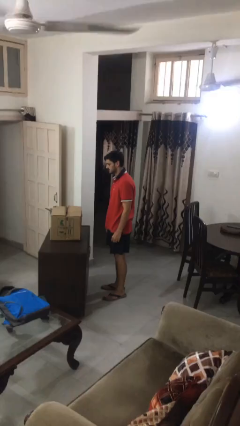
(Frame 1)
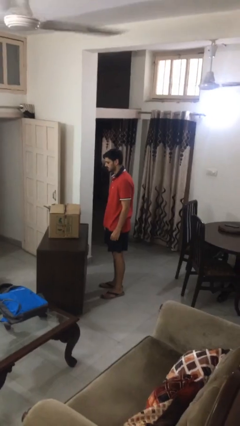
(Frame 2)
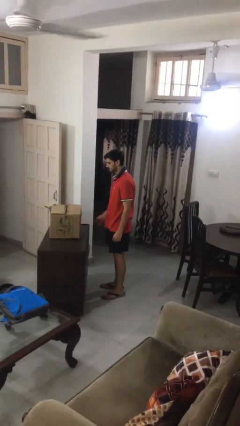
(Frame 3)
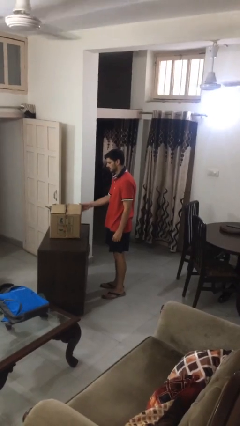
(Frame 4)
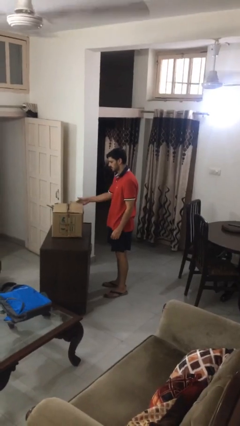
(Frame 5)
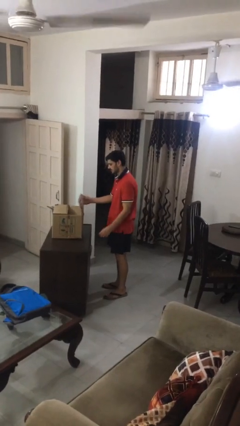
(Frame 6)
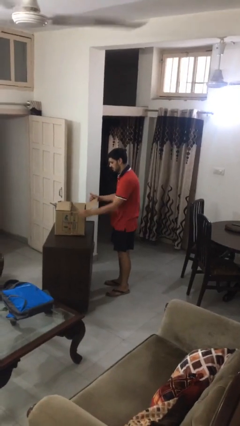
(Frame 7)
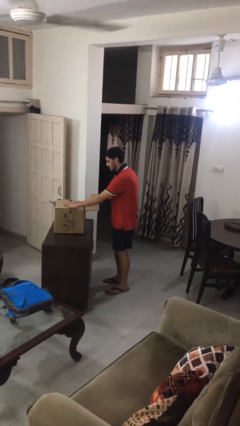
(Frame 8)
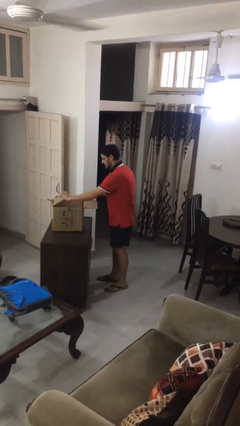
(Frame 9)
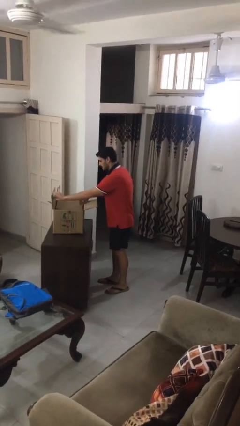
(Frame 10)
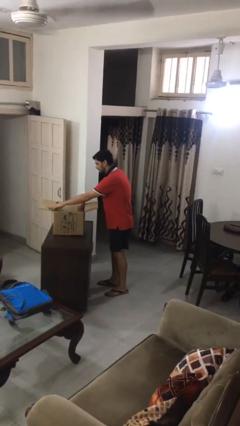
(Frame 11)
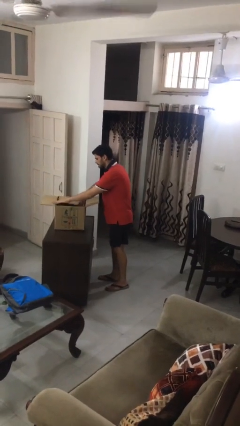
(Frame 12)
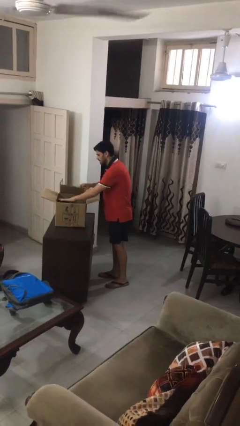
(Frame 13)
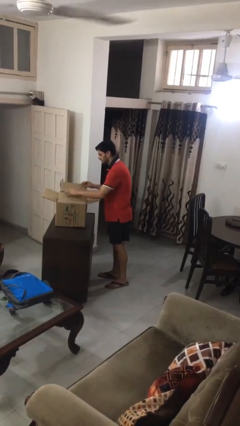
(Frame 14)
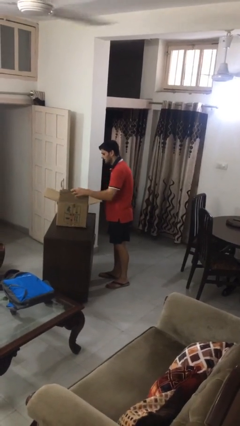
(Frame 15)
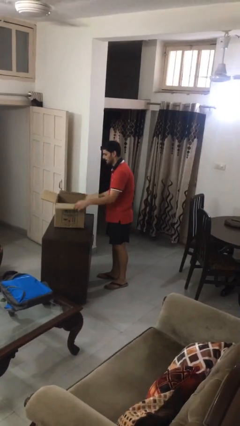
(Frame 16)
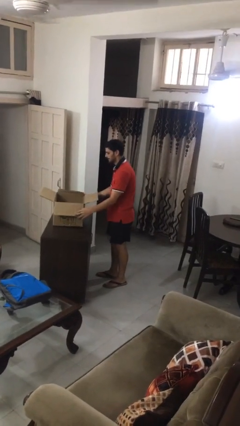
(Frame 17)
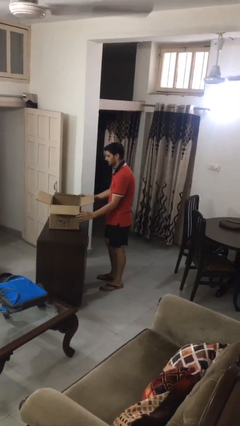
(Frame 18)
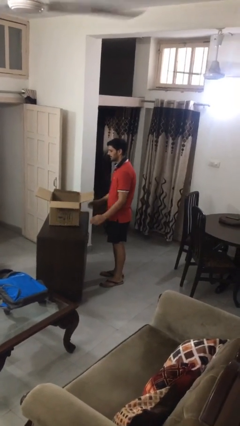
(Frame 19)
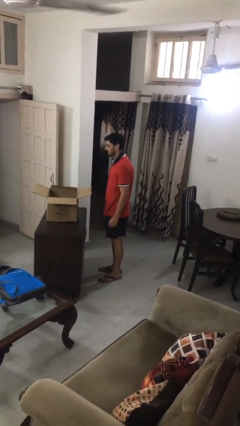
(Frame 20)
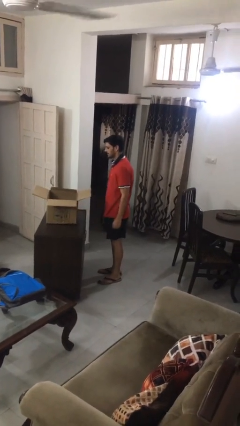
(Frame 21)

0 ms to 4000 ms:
person opens box

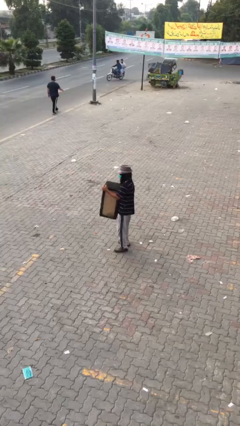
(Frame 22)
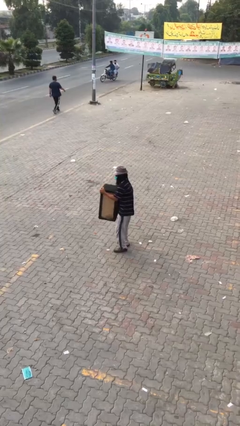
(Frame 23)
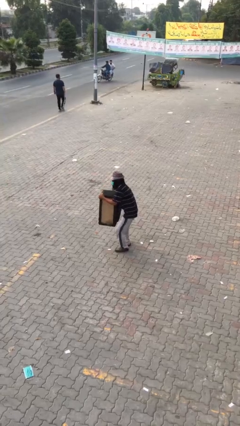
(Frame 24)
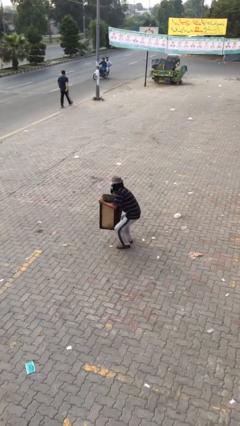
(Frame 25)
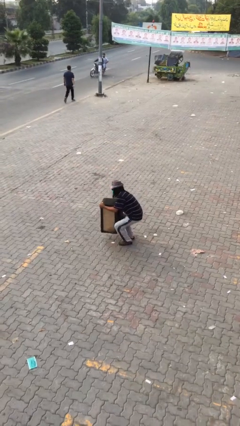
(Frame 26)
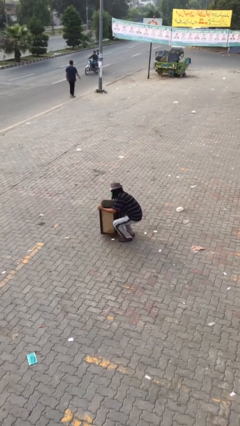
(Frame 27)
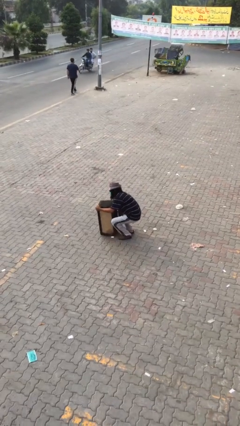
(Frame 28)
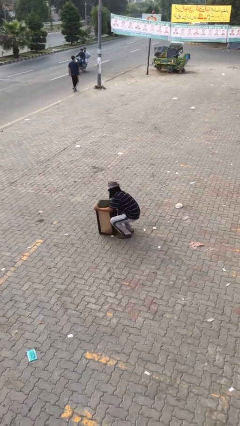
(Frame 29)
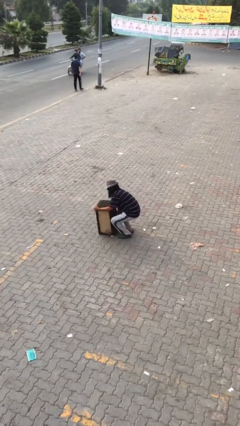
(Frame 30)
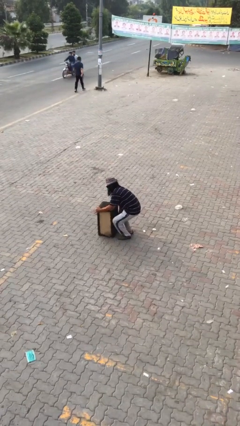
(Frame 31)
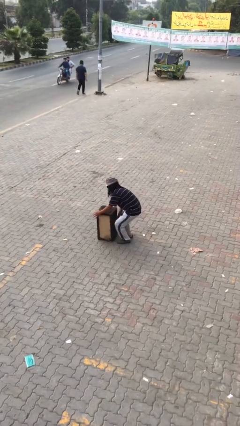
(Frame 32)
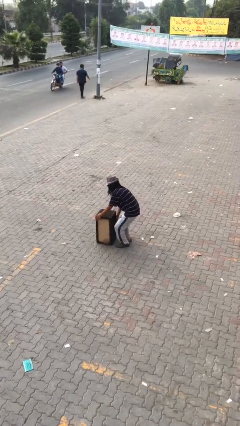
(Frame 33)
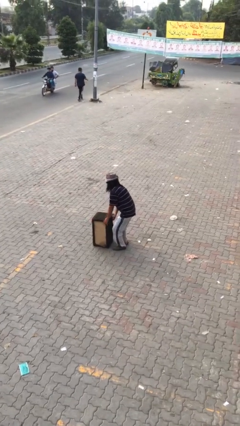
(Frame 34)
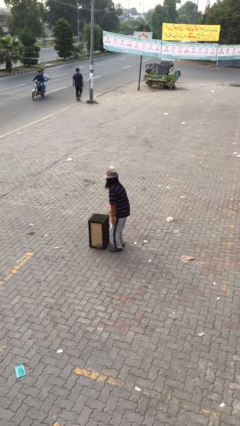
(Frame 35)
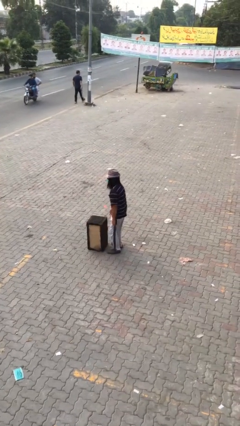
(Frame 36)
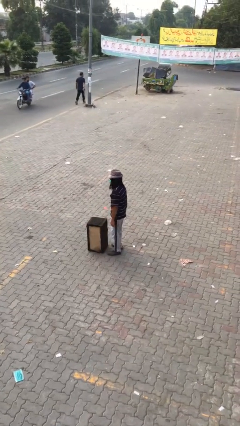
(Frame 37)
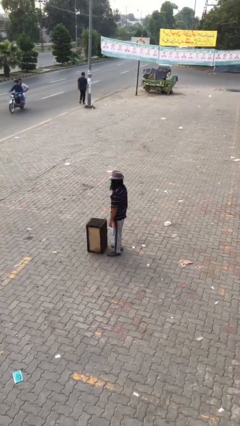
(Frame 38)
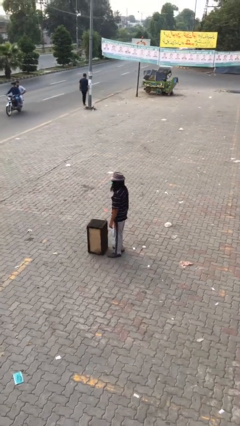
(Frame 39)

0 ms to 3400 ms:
person puts down object on floor

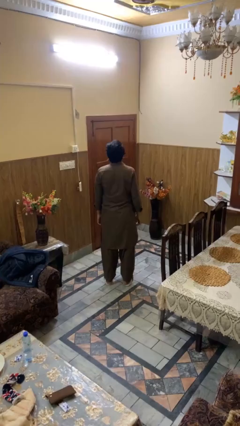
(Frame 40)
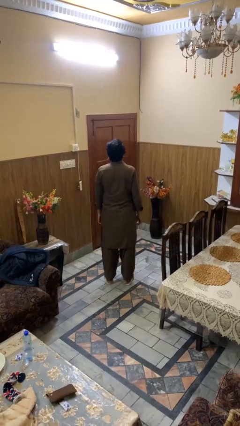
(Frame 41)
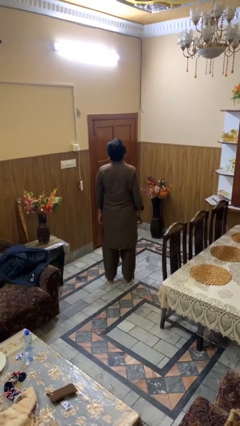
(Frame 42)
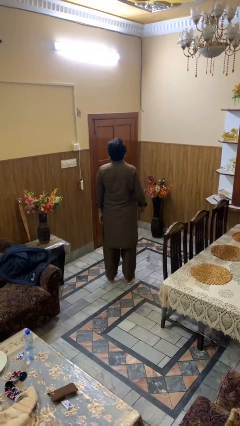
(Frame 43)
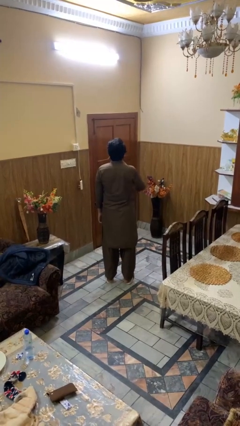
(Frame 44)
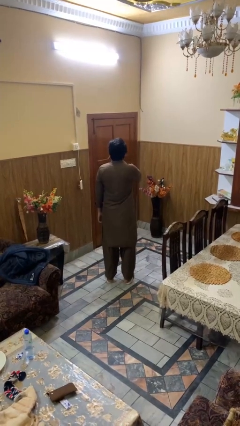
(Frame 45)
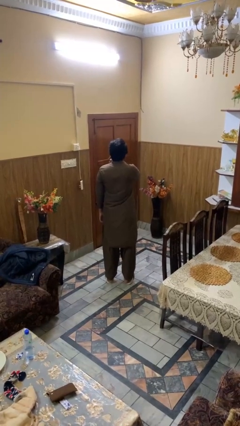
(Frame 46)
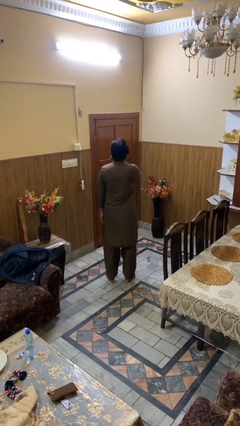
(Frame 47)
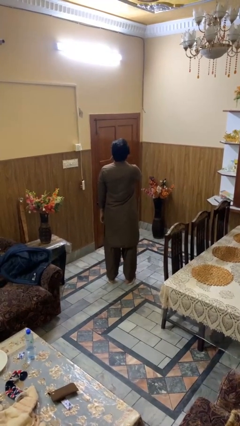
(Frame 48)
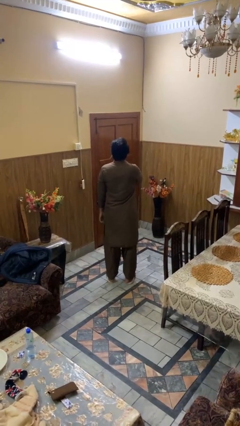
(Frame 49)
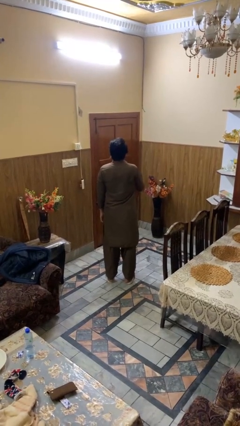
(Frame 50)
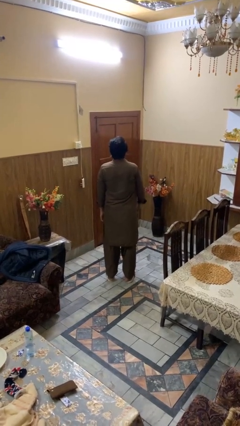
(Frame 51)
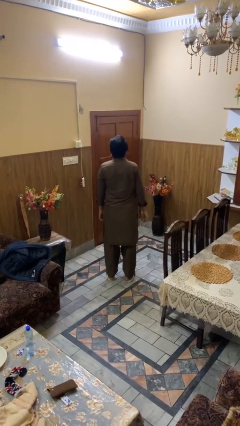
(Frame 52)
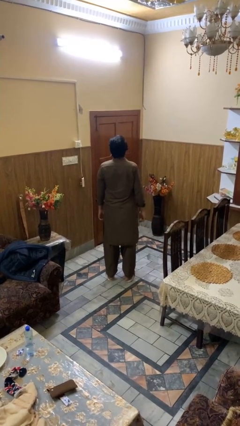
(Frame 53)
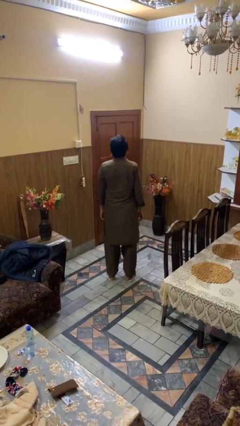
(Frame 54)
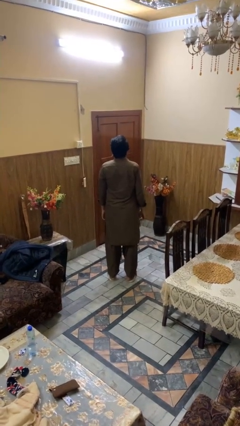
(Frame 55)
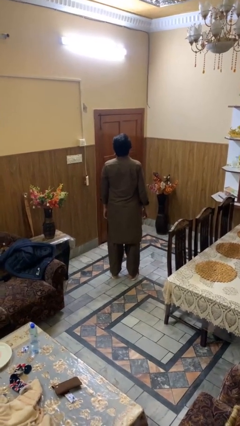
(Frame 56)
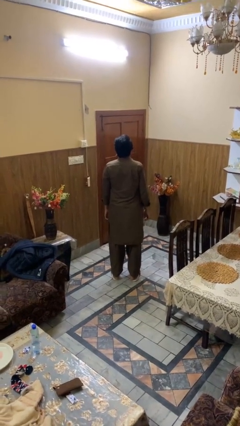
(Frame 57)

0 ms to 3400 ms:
person drums on chest

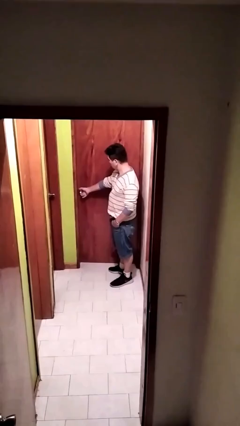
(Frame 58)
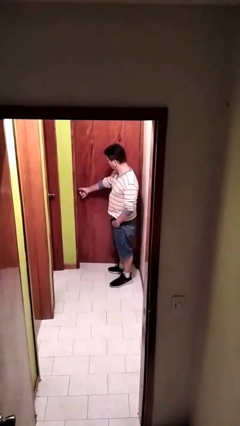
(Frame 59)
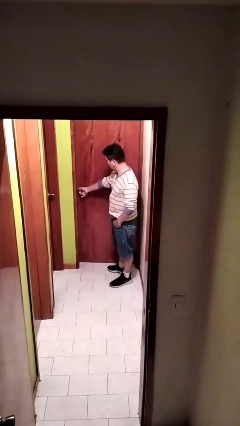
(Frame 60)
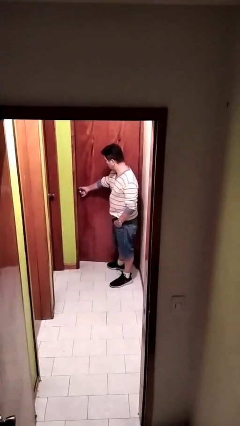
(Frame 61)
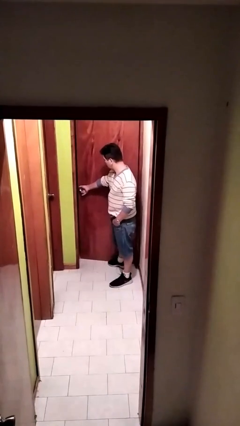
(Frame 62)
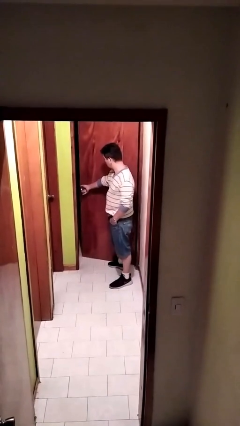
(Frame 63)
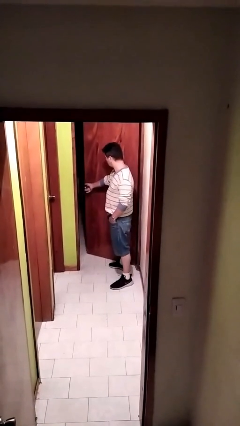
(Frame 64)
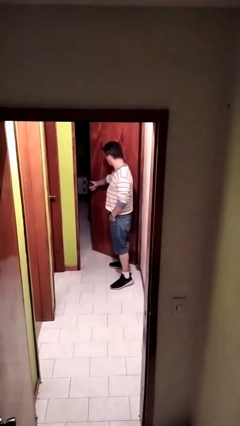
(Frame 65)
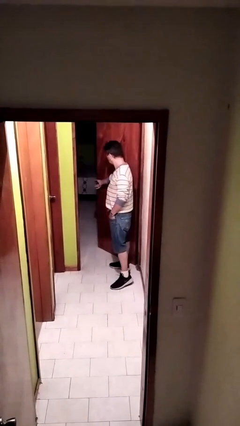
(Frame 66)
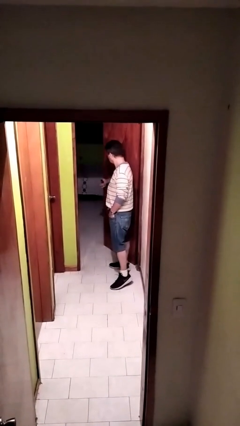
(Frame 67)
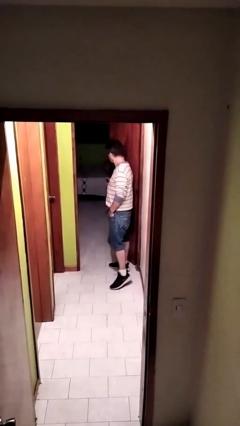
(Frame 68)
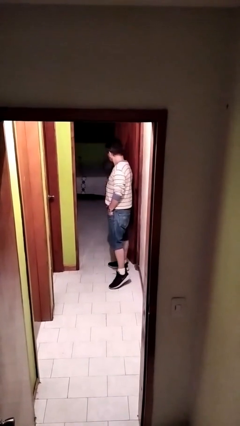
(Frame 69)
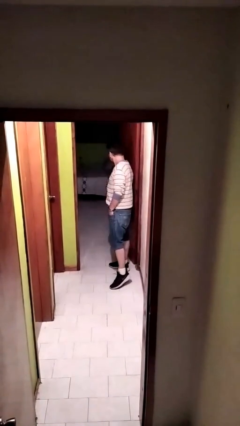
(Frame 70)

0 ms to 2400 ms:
person opens facility door

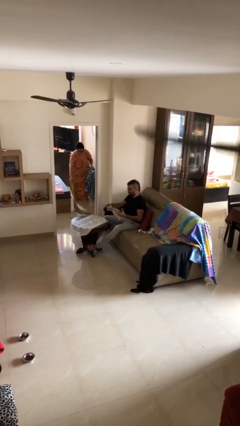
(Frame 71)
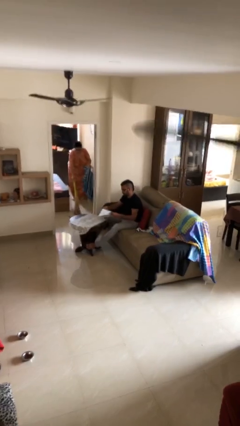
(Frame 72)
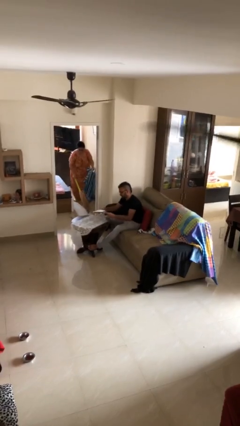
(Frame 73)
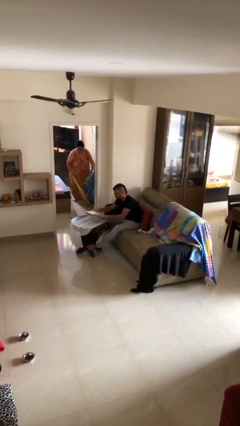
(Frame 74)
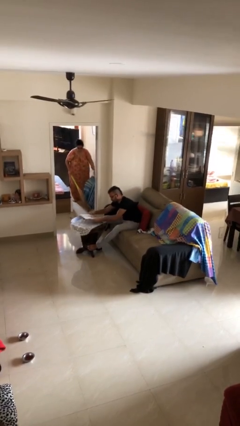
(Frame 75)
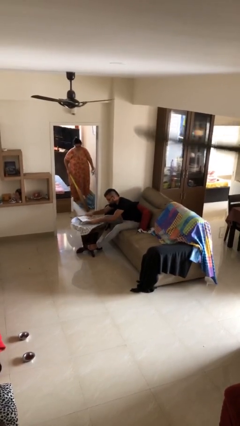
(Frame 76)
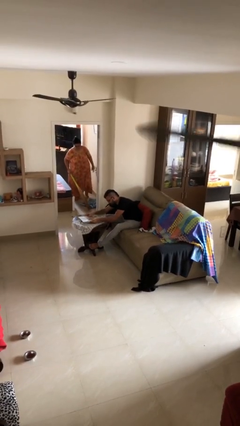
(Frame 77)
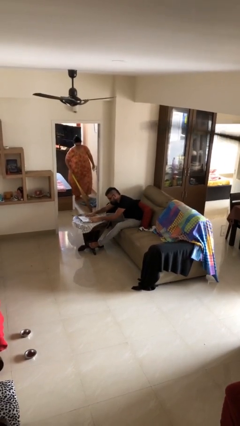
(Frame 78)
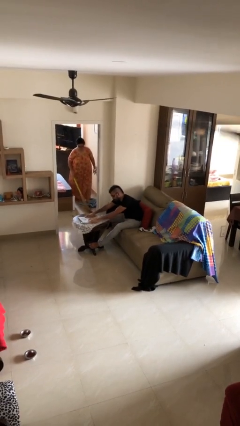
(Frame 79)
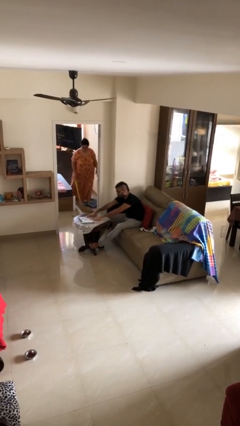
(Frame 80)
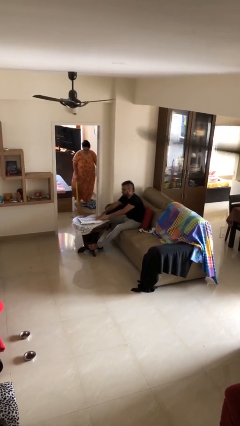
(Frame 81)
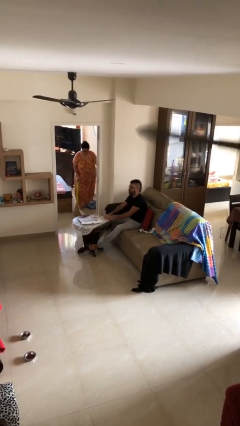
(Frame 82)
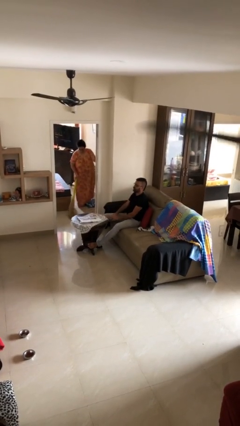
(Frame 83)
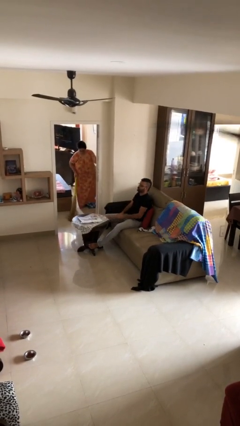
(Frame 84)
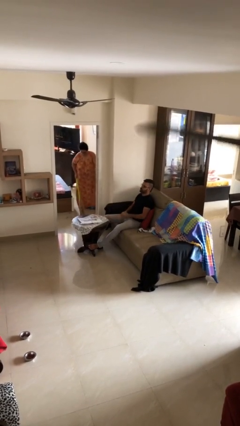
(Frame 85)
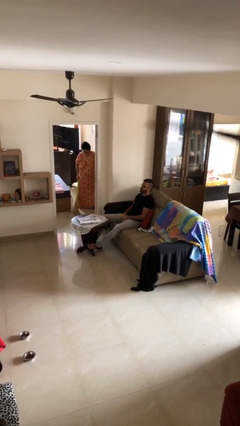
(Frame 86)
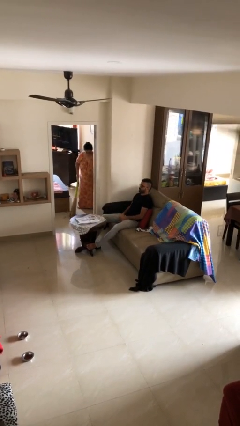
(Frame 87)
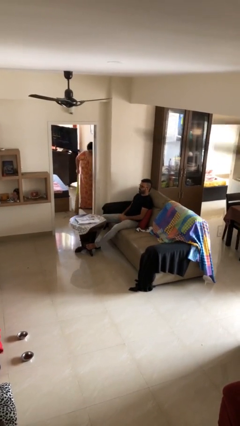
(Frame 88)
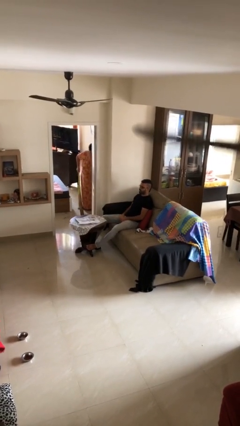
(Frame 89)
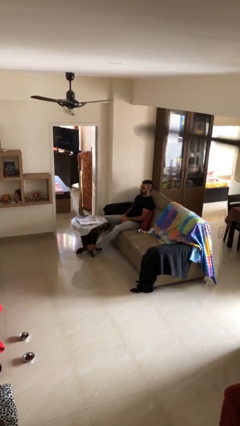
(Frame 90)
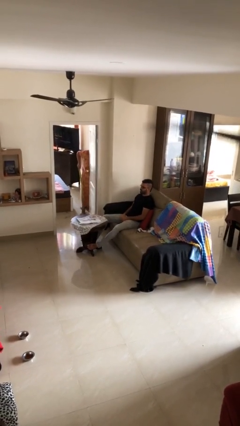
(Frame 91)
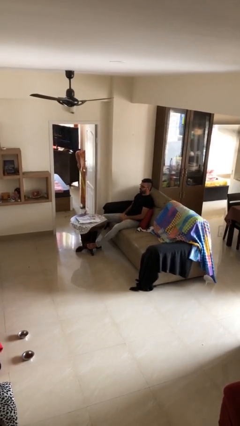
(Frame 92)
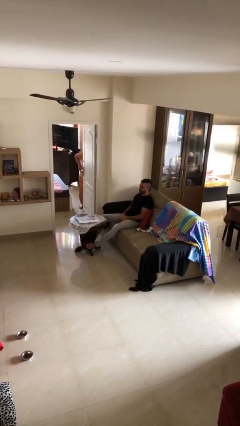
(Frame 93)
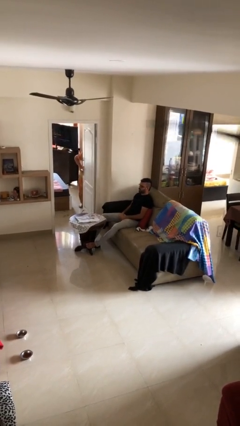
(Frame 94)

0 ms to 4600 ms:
person puts down object on table
